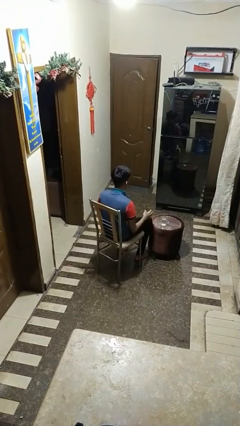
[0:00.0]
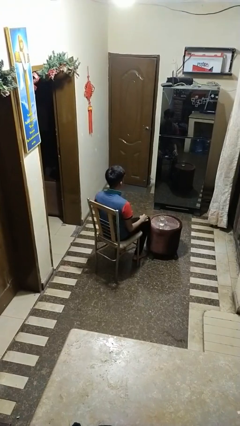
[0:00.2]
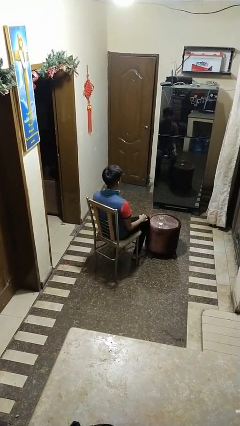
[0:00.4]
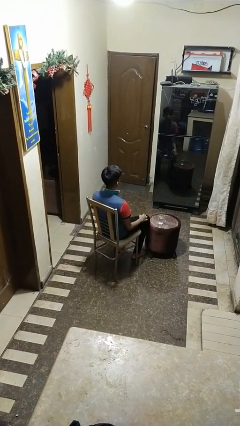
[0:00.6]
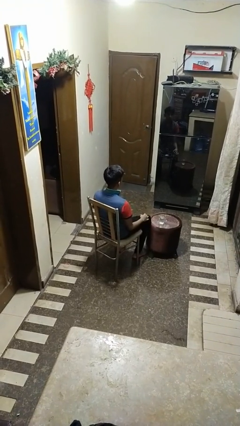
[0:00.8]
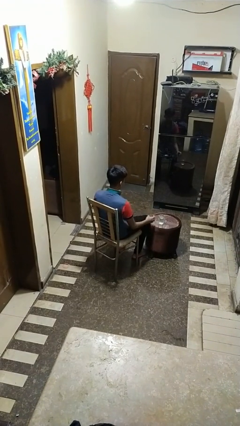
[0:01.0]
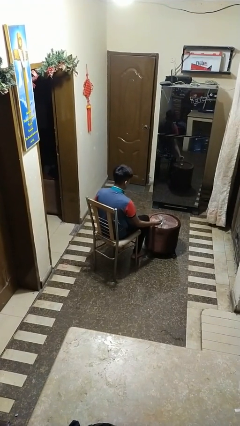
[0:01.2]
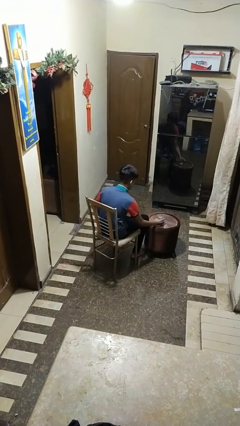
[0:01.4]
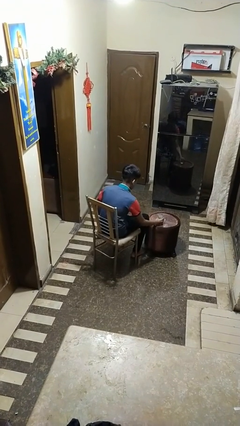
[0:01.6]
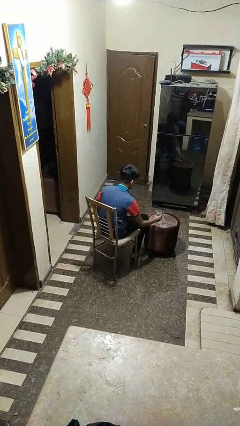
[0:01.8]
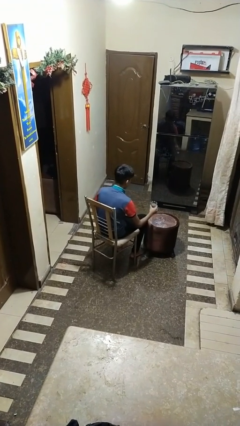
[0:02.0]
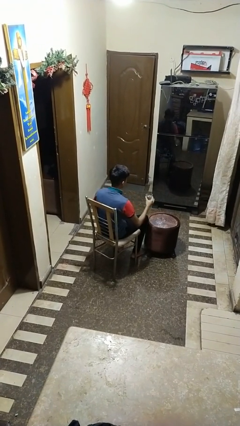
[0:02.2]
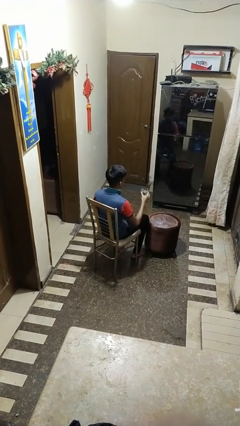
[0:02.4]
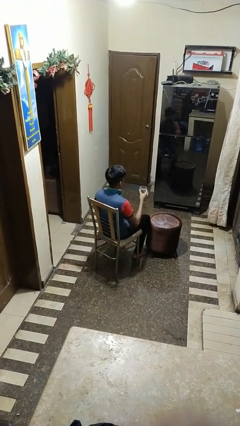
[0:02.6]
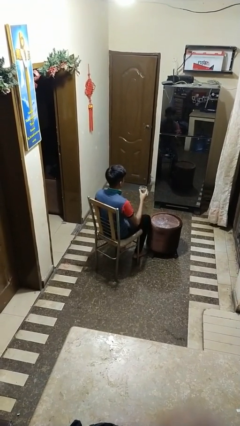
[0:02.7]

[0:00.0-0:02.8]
person picks up object from table

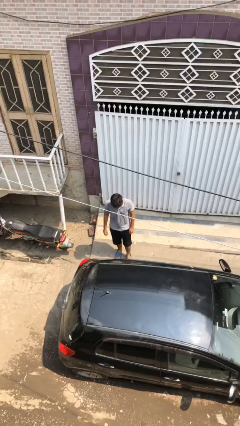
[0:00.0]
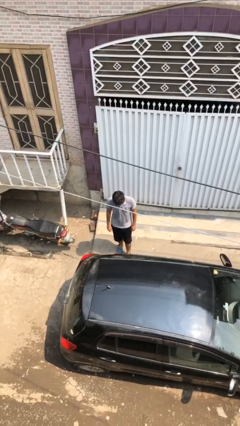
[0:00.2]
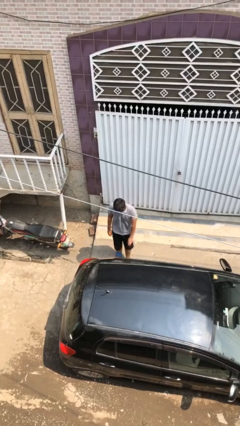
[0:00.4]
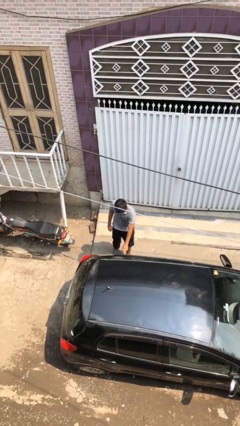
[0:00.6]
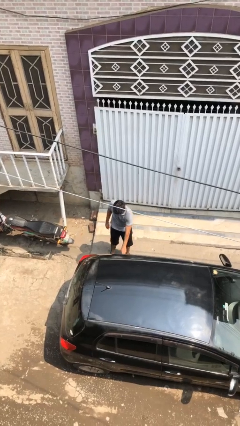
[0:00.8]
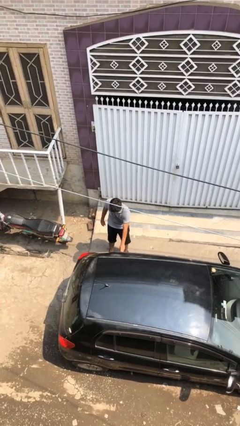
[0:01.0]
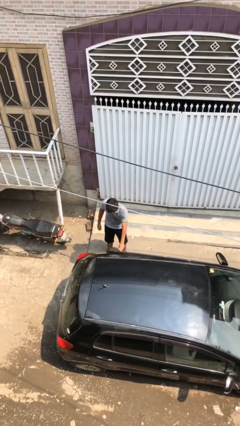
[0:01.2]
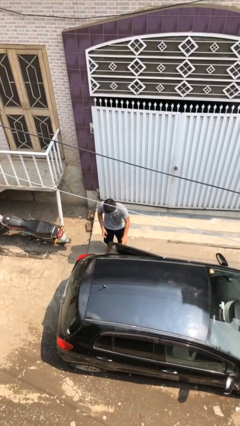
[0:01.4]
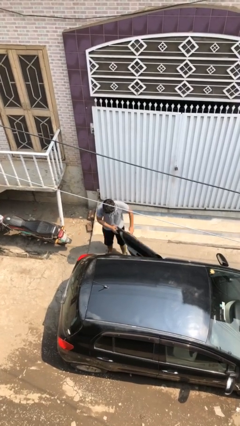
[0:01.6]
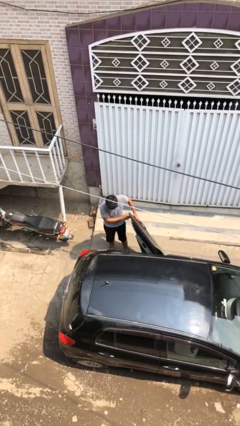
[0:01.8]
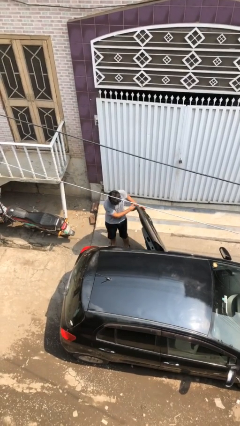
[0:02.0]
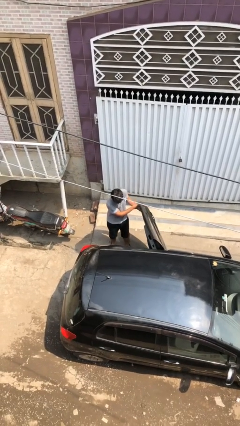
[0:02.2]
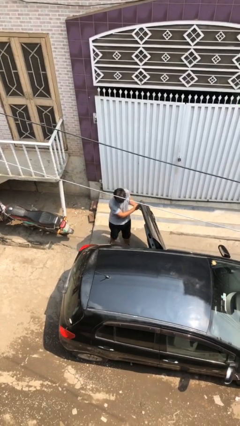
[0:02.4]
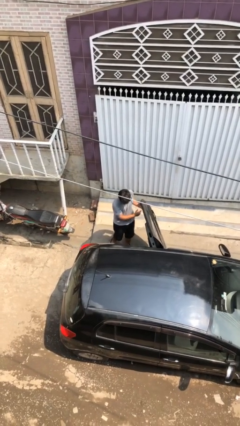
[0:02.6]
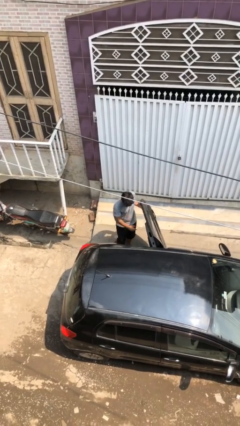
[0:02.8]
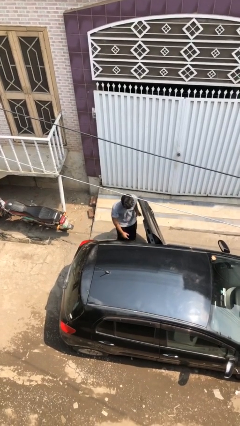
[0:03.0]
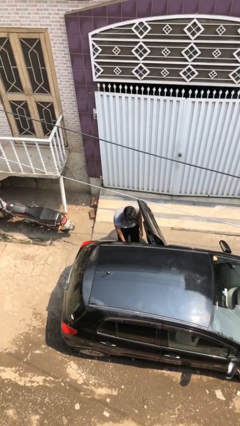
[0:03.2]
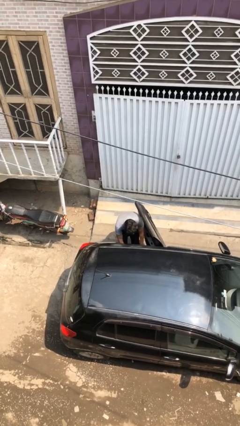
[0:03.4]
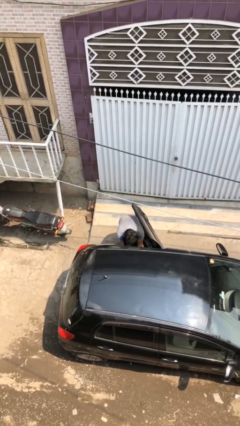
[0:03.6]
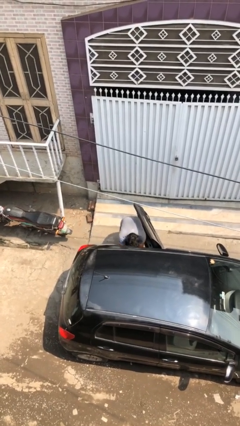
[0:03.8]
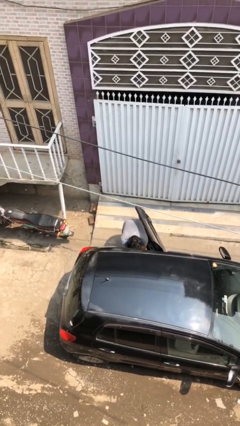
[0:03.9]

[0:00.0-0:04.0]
person opens car door

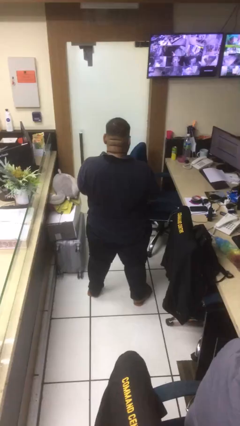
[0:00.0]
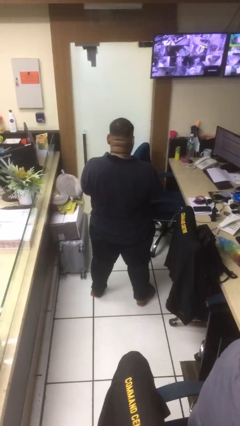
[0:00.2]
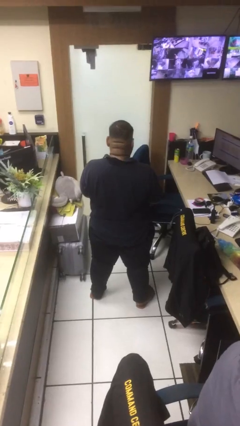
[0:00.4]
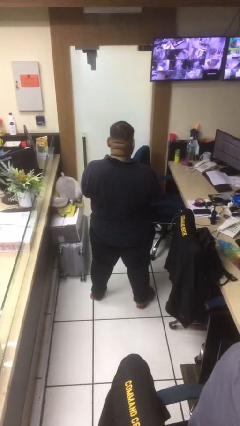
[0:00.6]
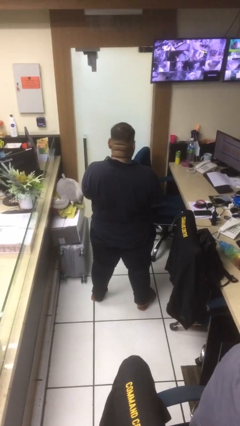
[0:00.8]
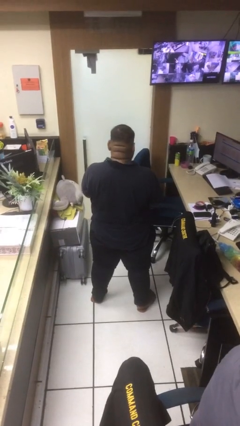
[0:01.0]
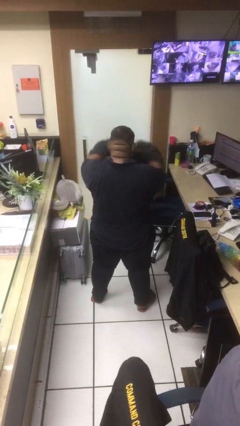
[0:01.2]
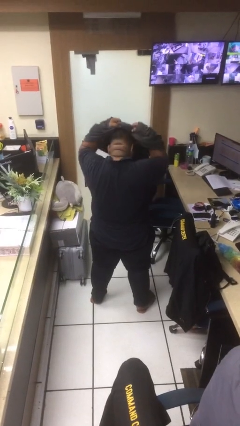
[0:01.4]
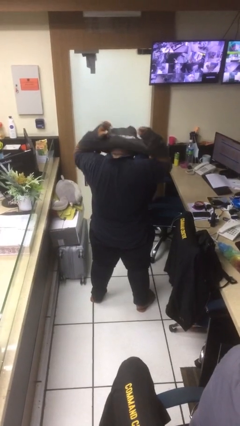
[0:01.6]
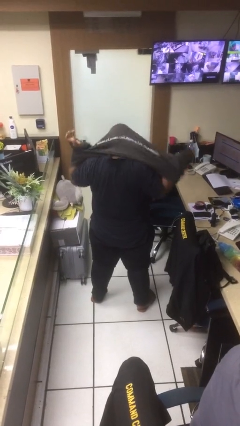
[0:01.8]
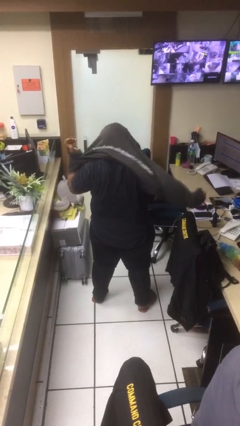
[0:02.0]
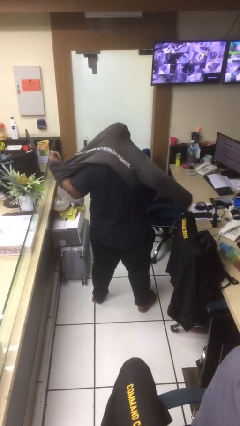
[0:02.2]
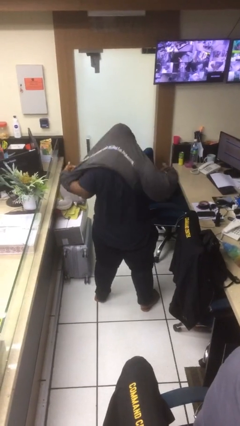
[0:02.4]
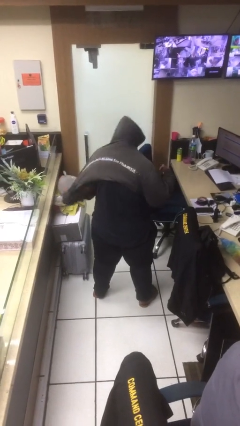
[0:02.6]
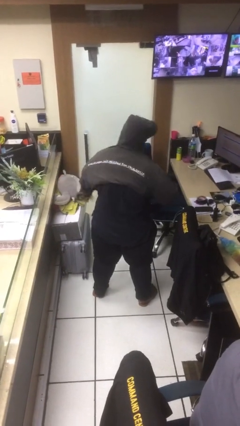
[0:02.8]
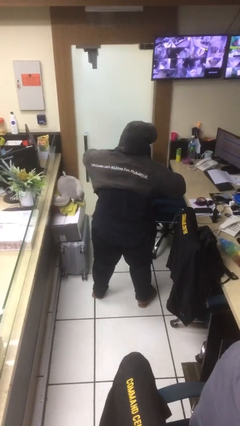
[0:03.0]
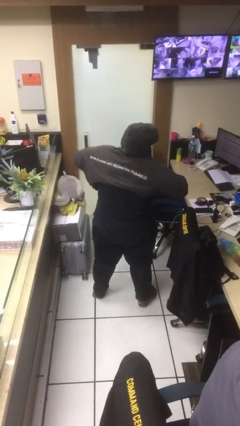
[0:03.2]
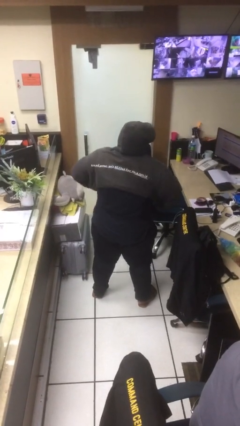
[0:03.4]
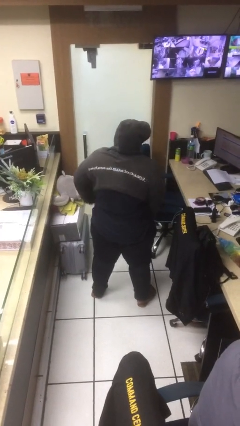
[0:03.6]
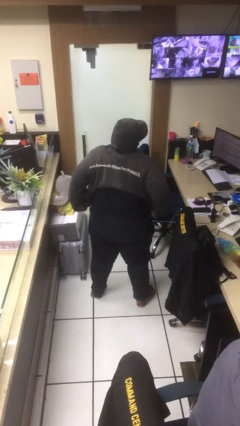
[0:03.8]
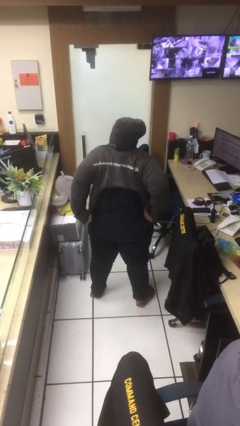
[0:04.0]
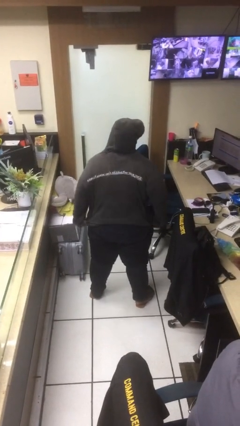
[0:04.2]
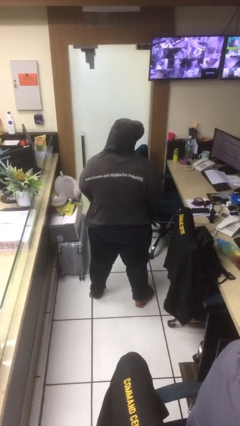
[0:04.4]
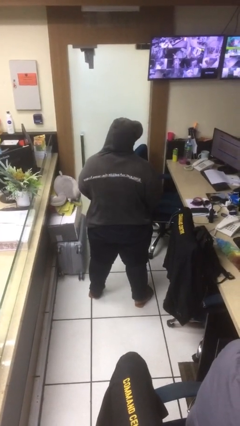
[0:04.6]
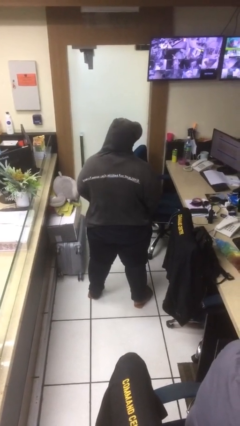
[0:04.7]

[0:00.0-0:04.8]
person puts on hoodie

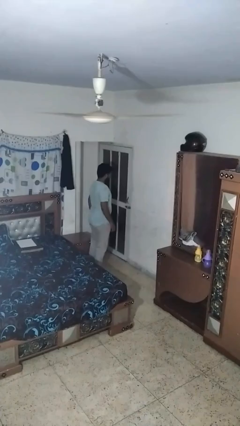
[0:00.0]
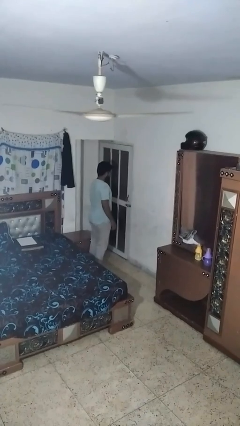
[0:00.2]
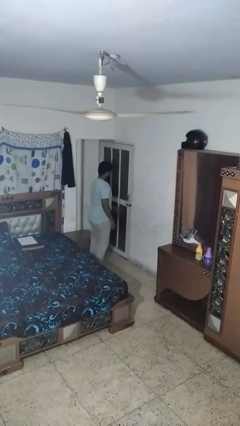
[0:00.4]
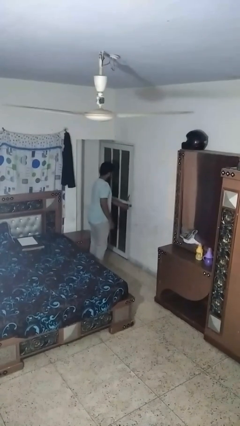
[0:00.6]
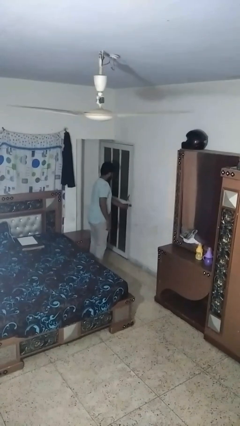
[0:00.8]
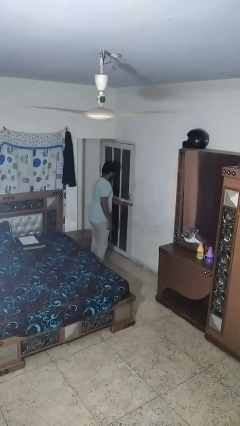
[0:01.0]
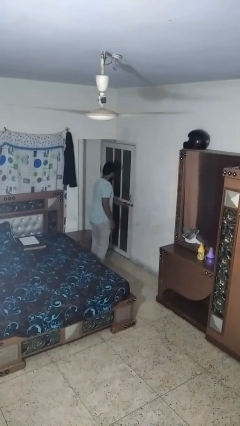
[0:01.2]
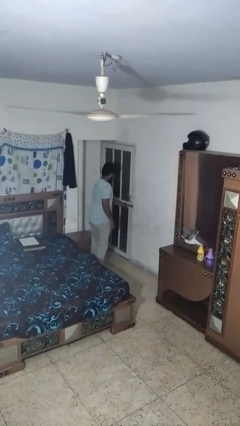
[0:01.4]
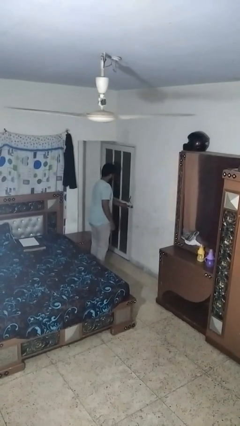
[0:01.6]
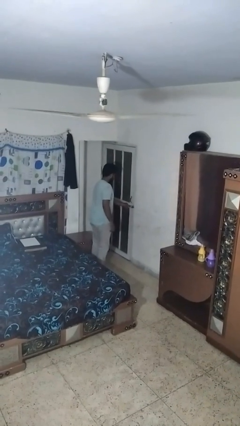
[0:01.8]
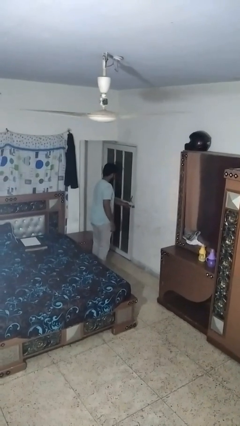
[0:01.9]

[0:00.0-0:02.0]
person unlocks door with keys

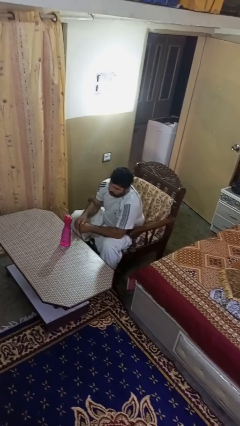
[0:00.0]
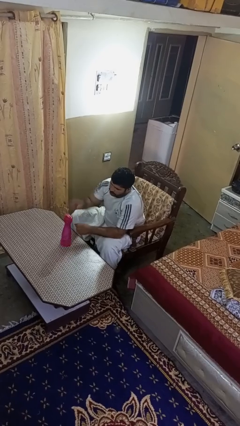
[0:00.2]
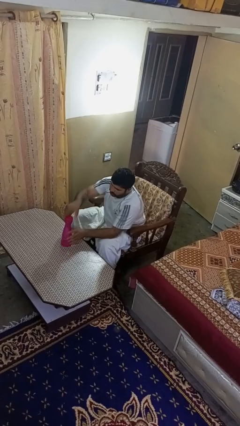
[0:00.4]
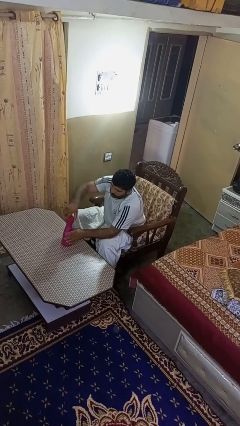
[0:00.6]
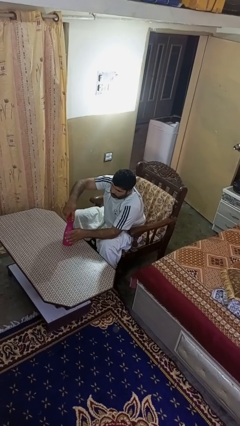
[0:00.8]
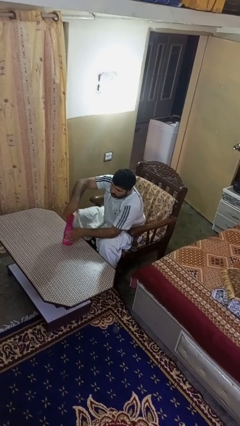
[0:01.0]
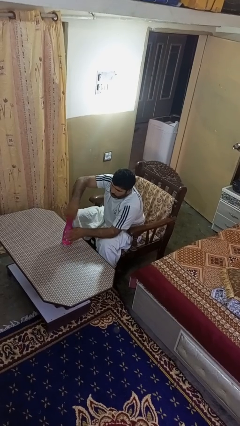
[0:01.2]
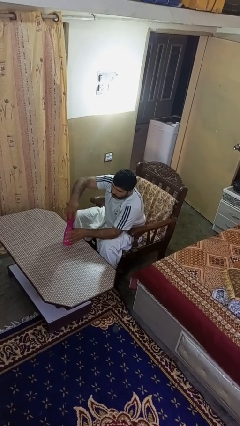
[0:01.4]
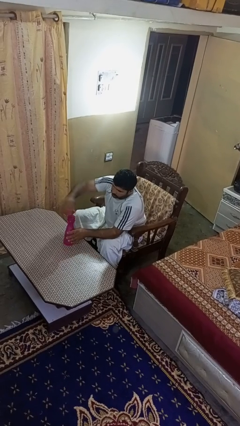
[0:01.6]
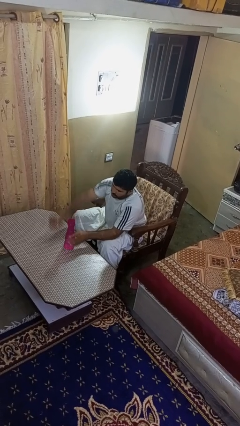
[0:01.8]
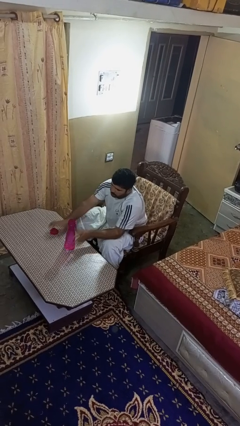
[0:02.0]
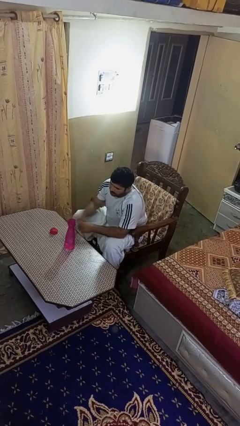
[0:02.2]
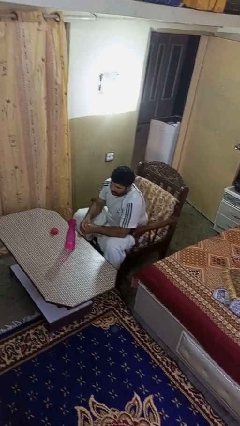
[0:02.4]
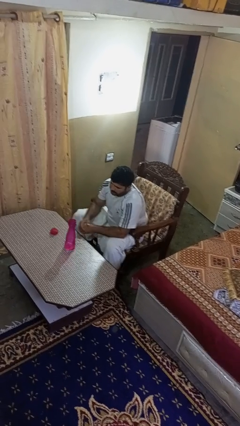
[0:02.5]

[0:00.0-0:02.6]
person unscrews lid from bottle

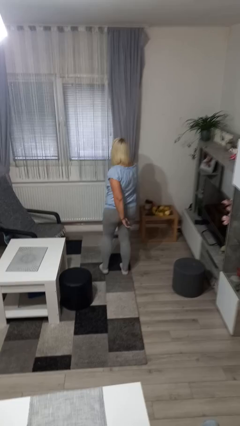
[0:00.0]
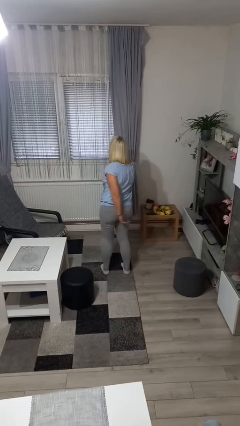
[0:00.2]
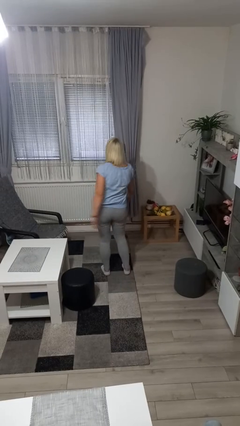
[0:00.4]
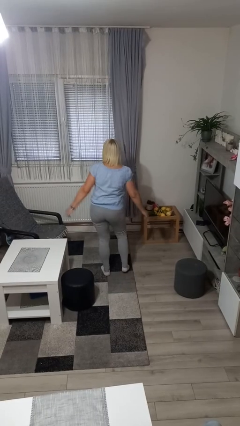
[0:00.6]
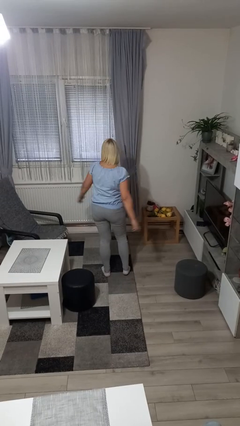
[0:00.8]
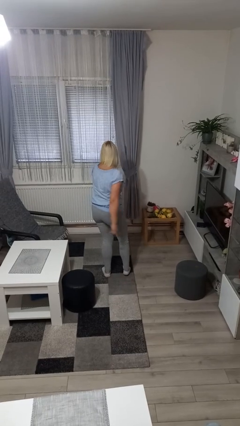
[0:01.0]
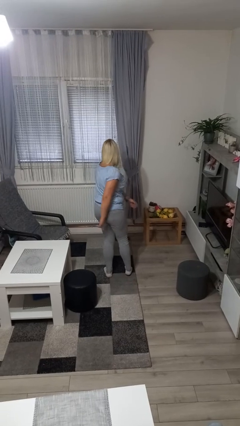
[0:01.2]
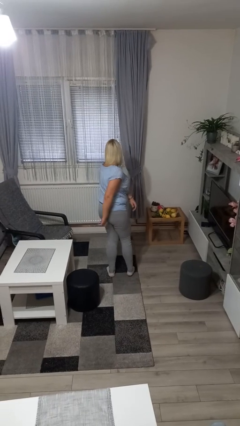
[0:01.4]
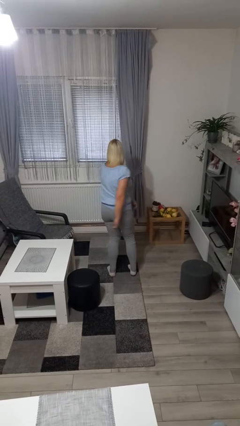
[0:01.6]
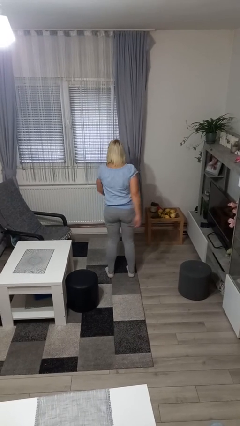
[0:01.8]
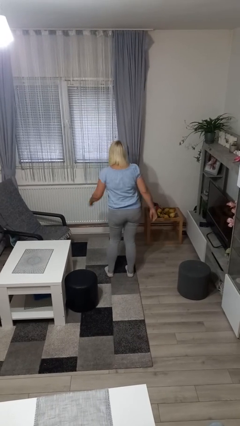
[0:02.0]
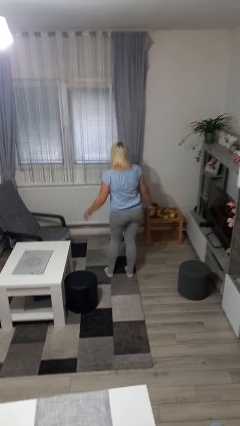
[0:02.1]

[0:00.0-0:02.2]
person dances in place
